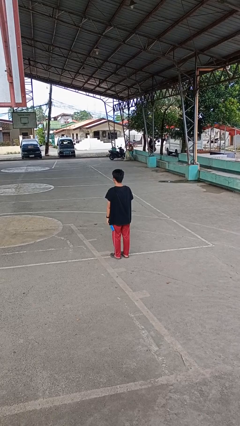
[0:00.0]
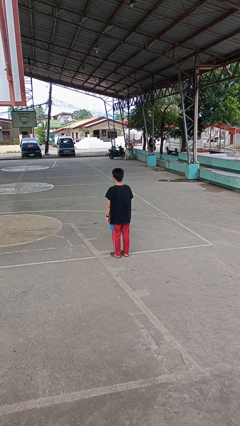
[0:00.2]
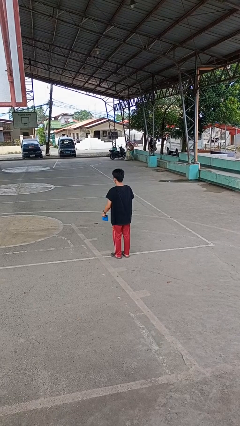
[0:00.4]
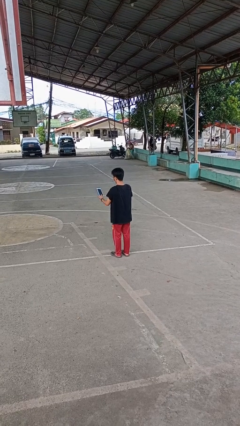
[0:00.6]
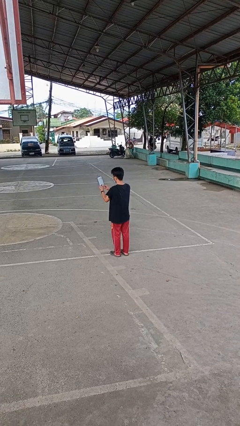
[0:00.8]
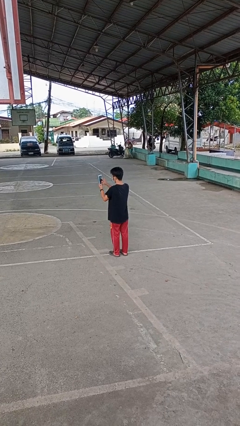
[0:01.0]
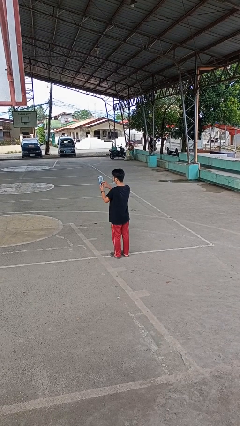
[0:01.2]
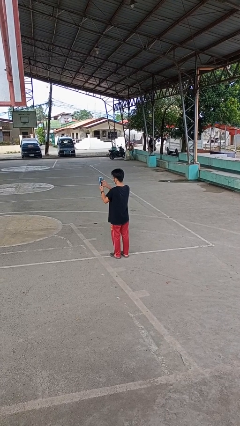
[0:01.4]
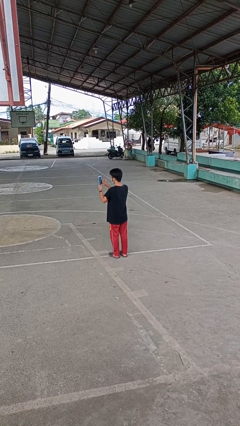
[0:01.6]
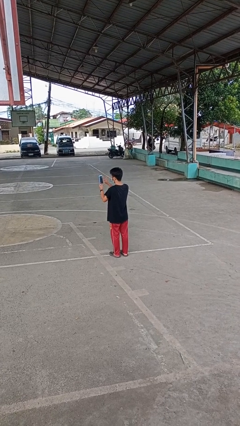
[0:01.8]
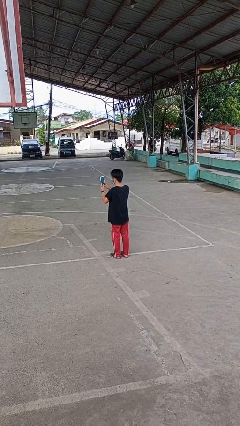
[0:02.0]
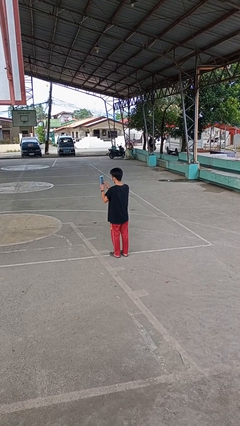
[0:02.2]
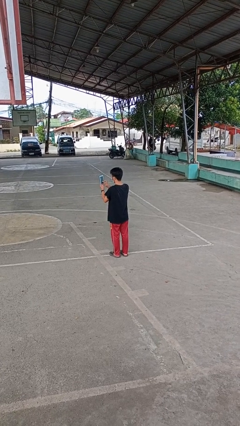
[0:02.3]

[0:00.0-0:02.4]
person interacts with tablet

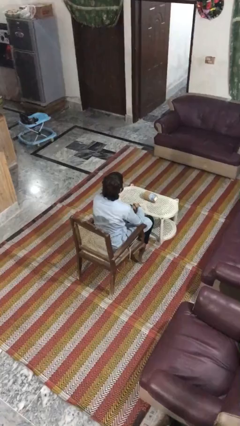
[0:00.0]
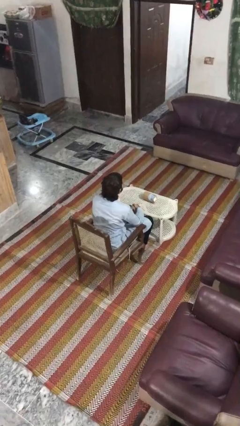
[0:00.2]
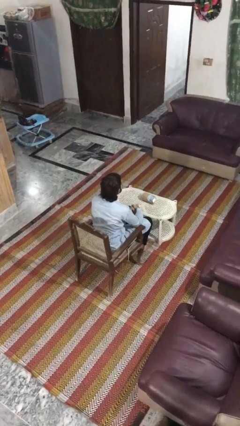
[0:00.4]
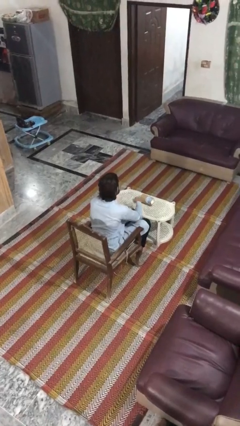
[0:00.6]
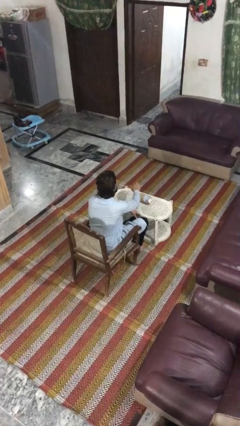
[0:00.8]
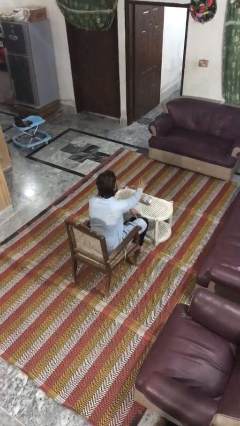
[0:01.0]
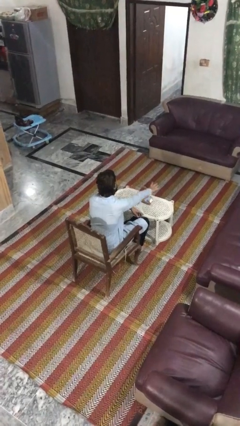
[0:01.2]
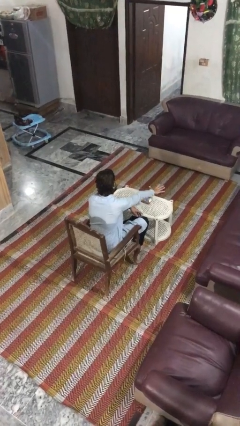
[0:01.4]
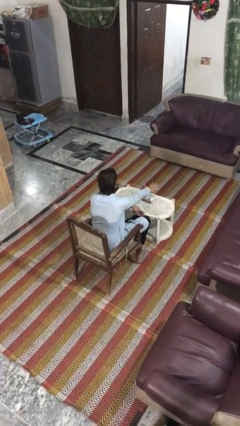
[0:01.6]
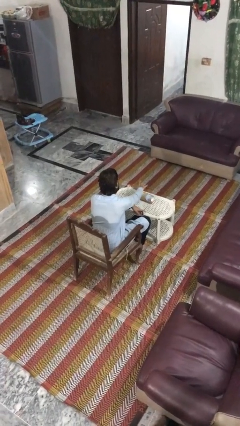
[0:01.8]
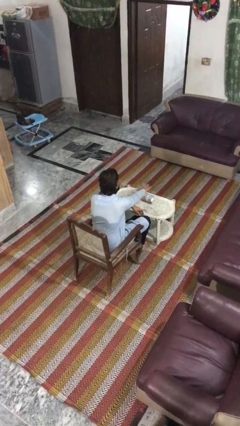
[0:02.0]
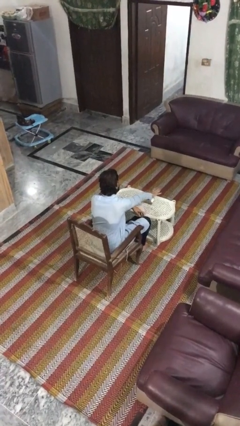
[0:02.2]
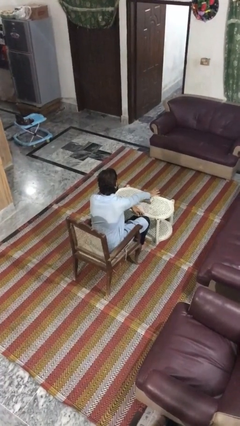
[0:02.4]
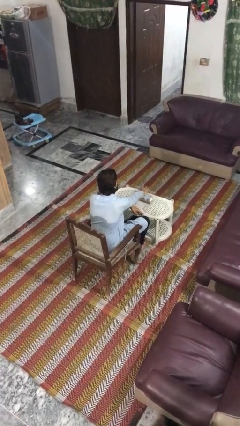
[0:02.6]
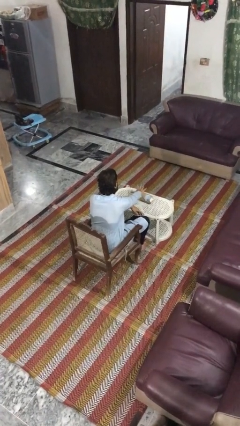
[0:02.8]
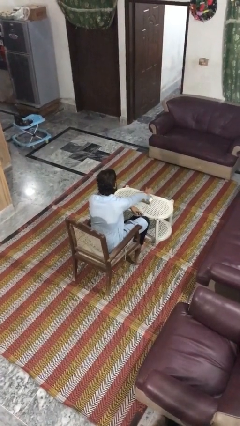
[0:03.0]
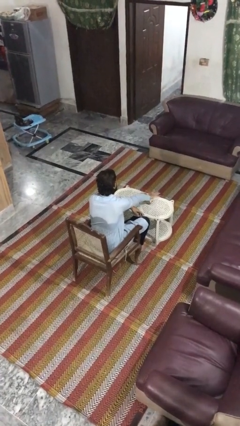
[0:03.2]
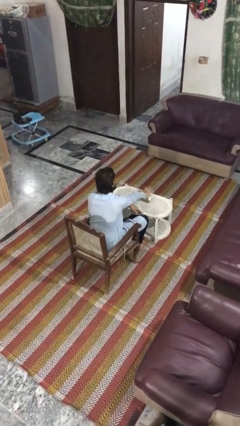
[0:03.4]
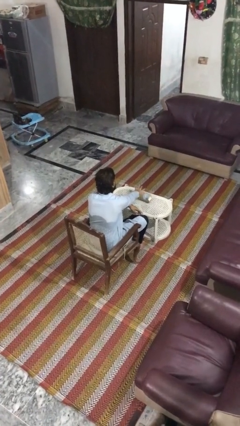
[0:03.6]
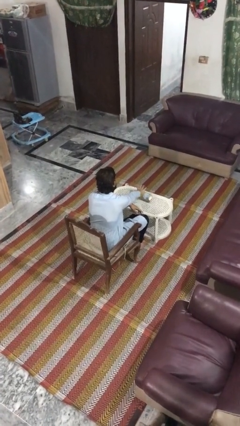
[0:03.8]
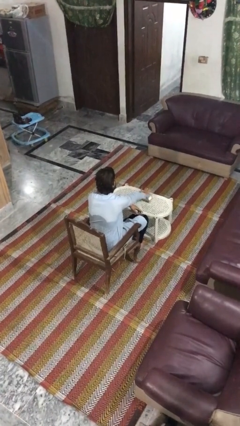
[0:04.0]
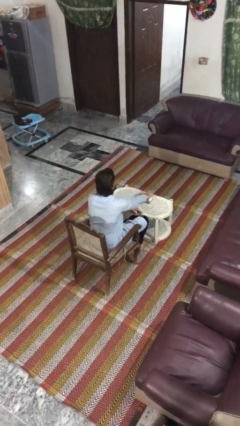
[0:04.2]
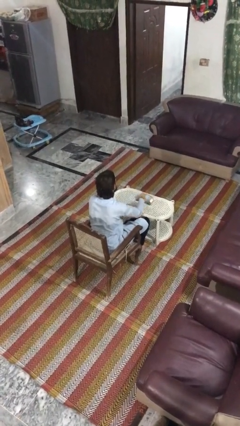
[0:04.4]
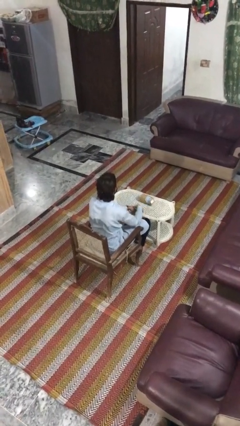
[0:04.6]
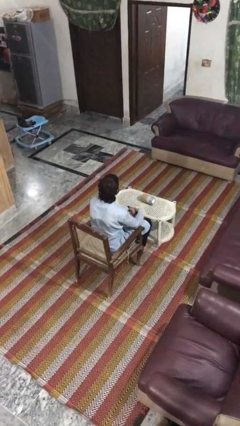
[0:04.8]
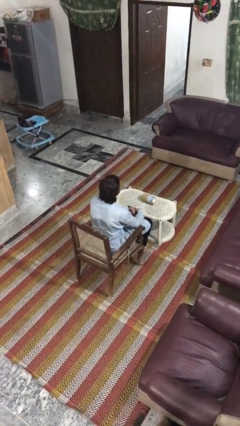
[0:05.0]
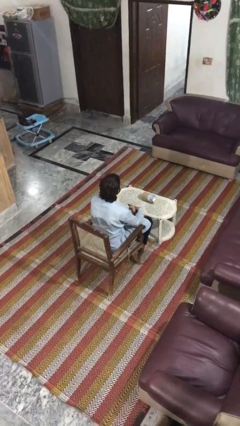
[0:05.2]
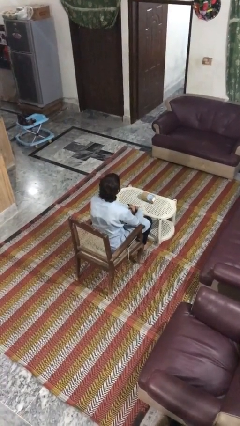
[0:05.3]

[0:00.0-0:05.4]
person waves hand over object

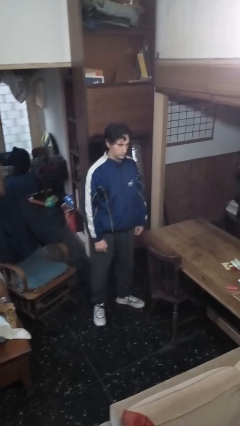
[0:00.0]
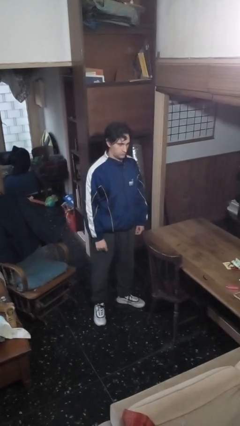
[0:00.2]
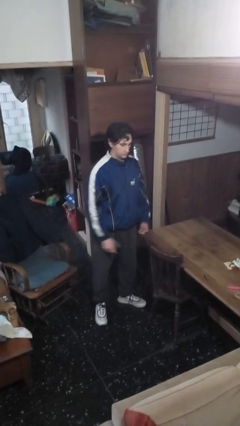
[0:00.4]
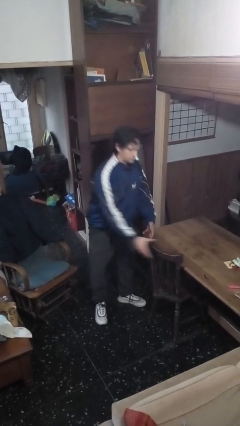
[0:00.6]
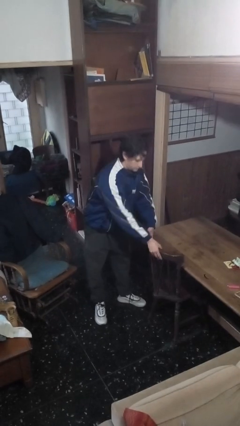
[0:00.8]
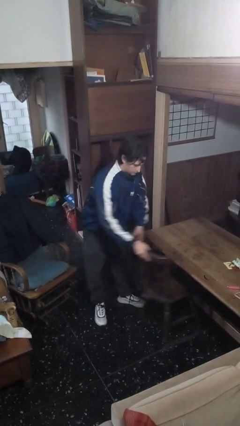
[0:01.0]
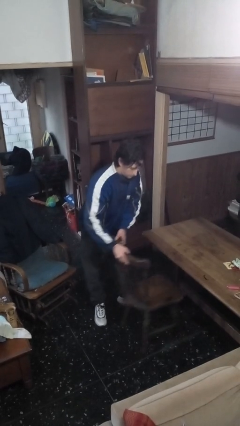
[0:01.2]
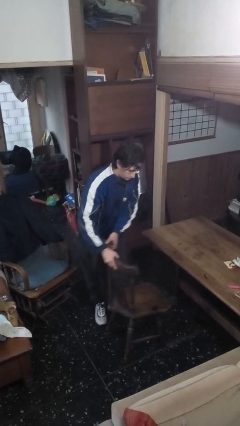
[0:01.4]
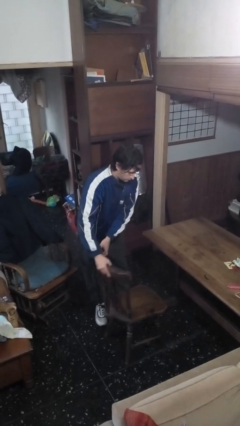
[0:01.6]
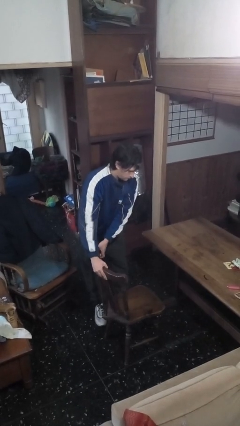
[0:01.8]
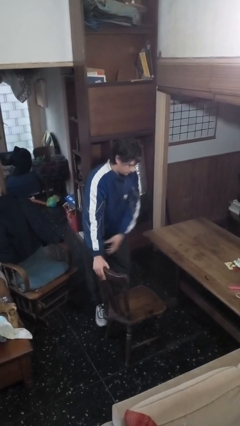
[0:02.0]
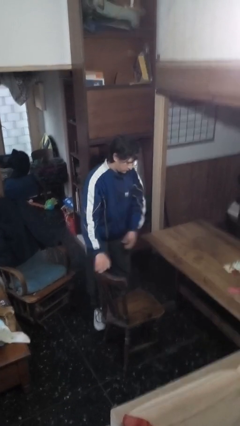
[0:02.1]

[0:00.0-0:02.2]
person pulls out chair

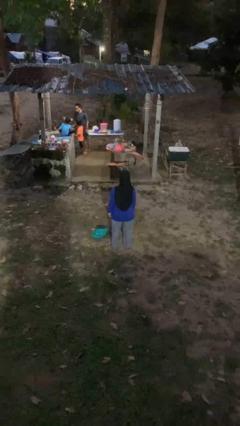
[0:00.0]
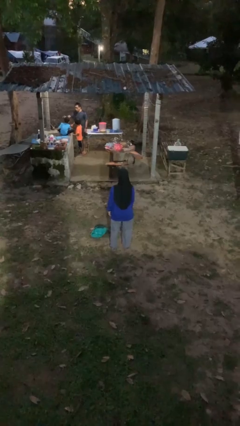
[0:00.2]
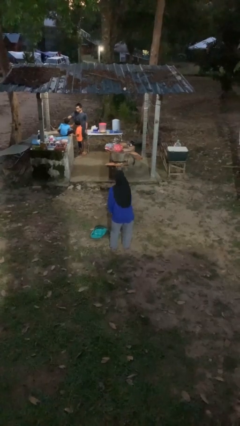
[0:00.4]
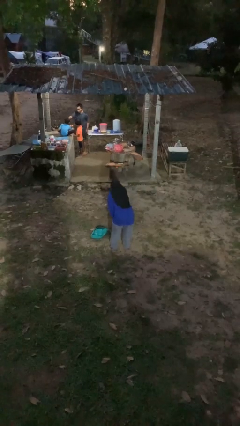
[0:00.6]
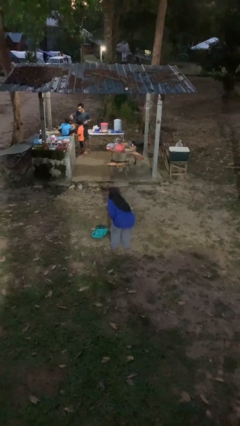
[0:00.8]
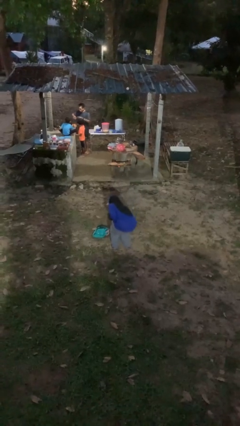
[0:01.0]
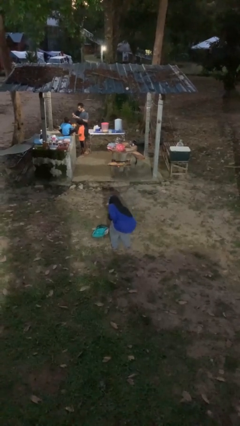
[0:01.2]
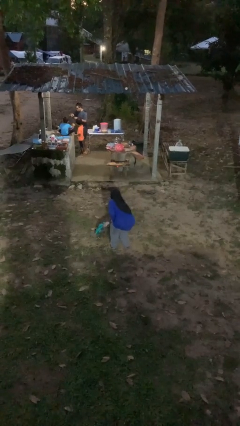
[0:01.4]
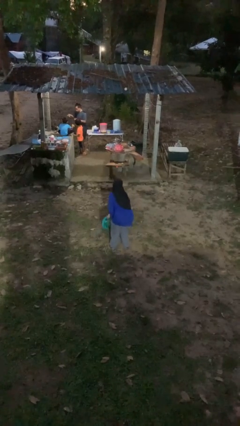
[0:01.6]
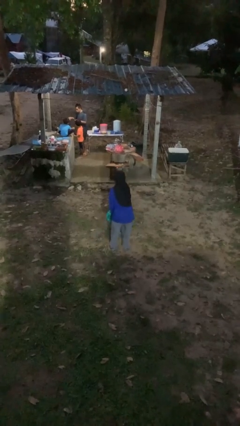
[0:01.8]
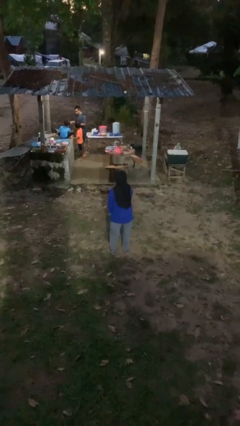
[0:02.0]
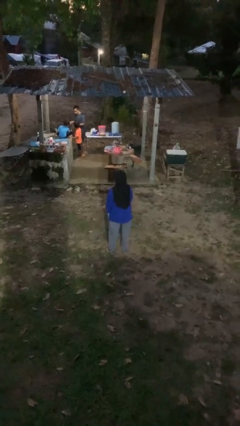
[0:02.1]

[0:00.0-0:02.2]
person picks up object from floor

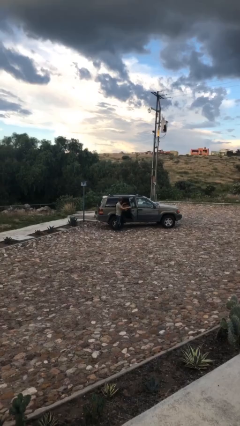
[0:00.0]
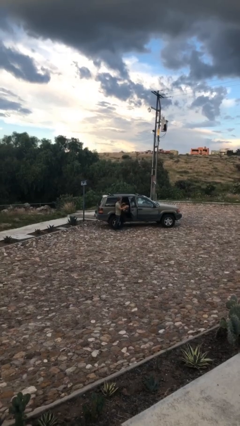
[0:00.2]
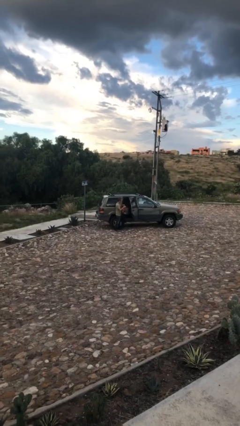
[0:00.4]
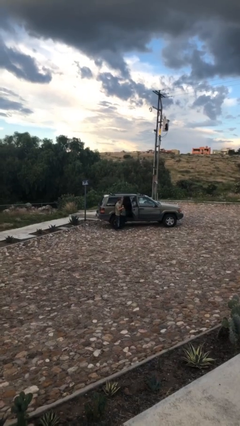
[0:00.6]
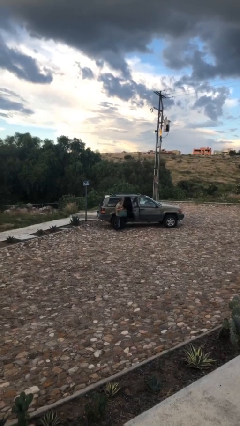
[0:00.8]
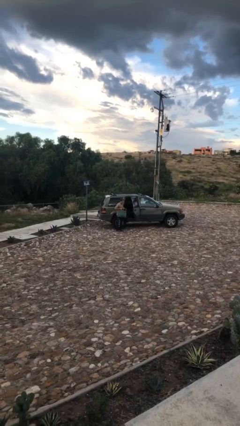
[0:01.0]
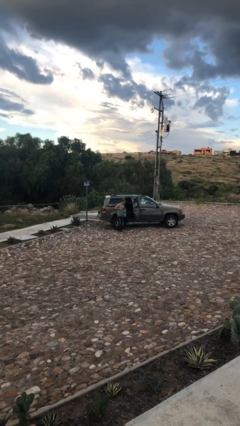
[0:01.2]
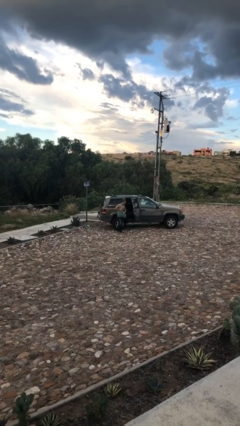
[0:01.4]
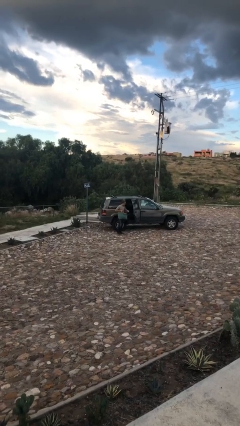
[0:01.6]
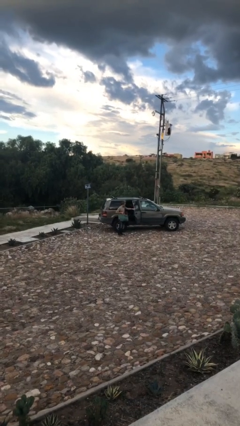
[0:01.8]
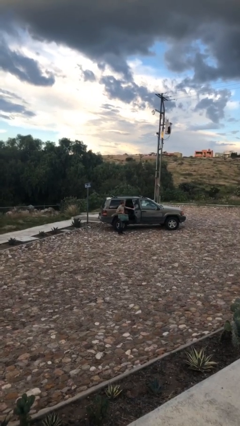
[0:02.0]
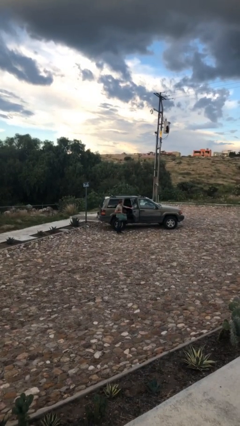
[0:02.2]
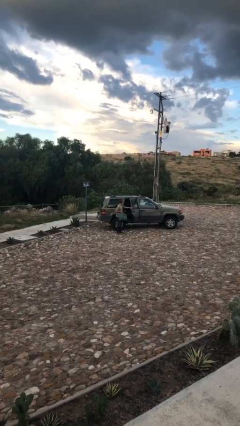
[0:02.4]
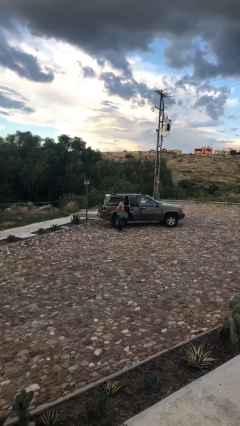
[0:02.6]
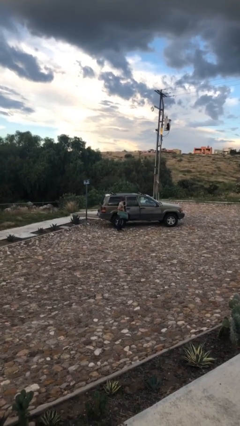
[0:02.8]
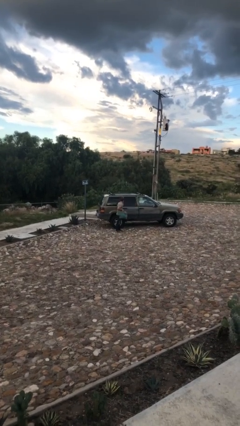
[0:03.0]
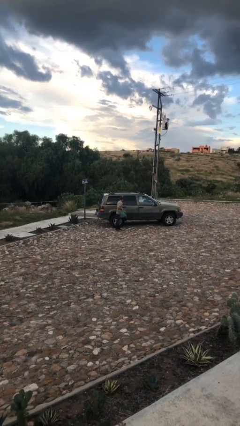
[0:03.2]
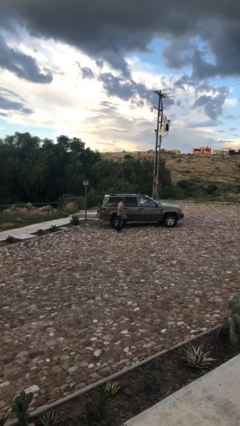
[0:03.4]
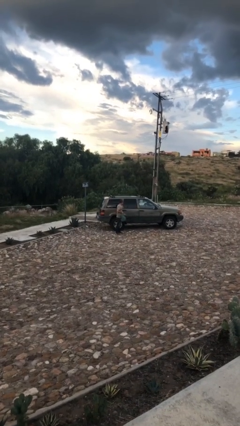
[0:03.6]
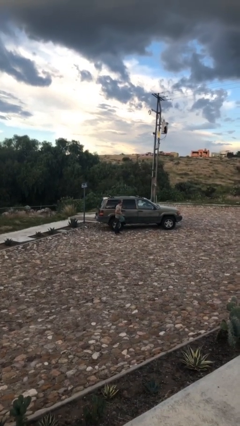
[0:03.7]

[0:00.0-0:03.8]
person closes car door

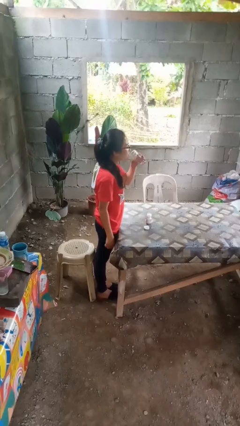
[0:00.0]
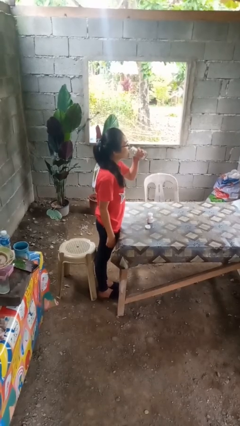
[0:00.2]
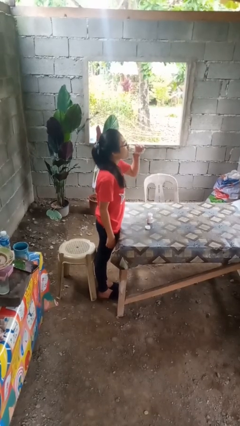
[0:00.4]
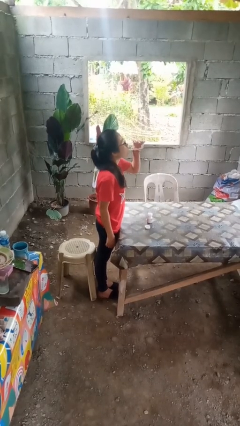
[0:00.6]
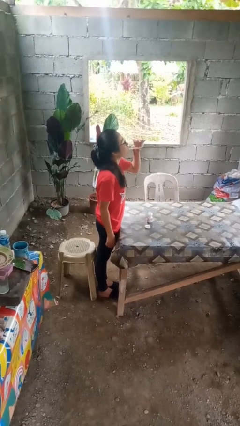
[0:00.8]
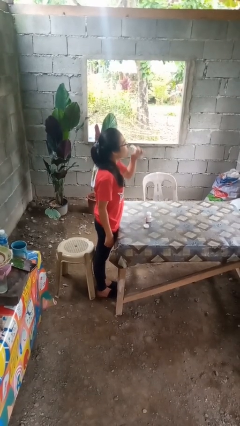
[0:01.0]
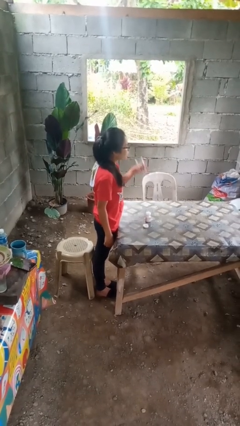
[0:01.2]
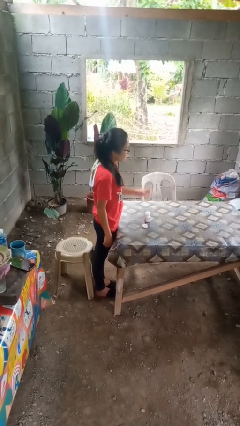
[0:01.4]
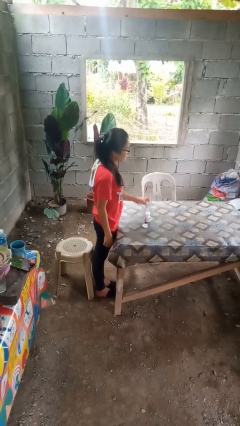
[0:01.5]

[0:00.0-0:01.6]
person drinks from cup
